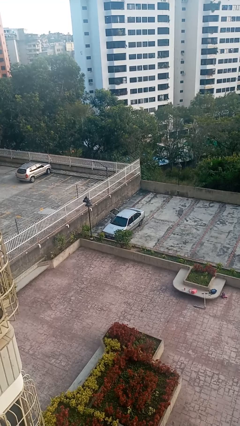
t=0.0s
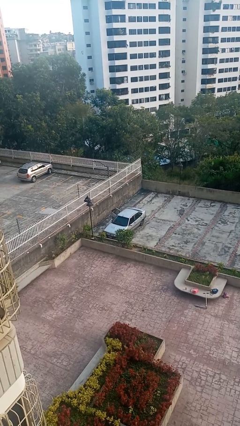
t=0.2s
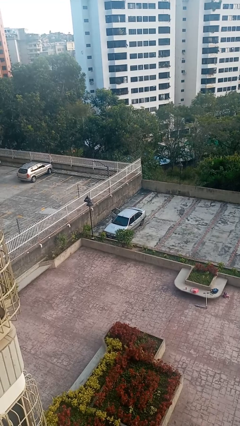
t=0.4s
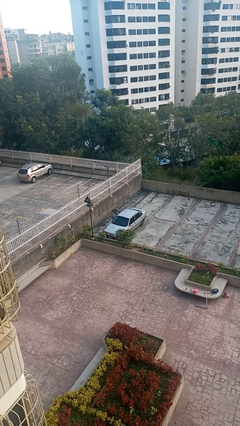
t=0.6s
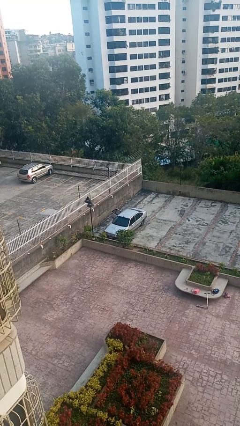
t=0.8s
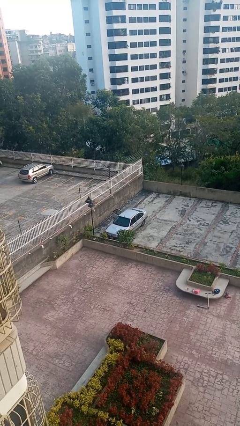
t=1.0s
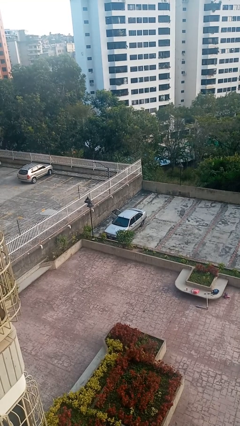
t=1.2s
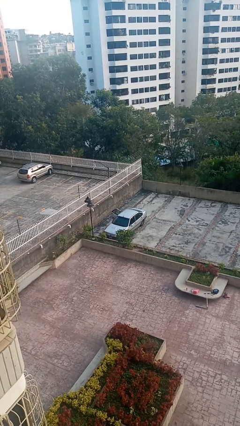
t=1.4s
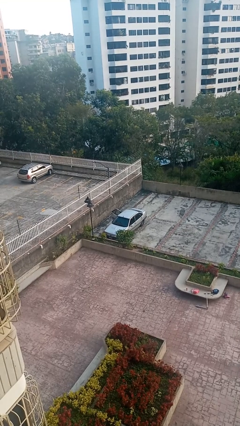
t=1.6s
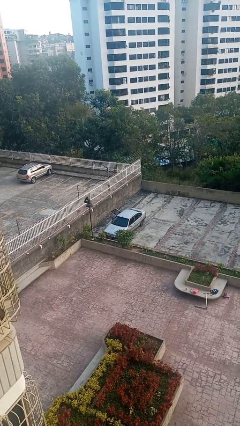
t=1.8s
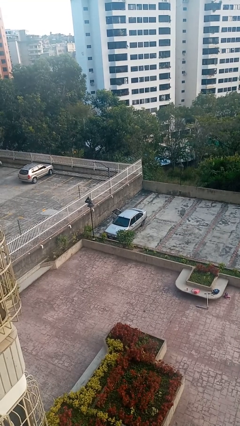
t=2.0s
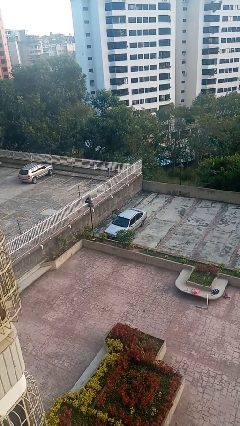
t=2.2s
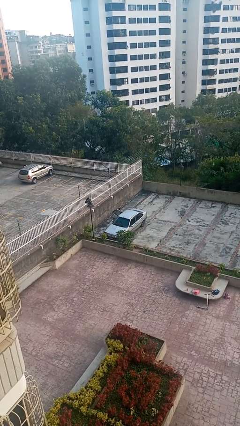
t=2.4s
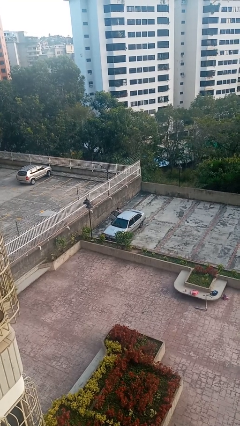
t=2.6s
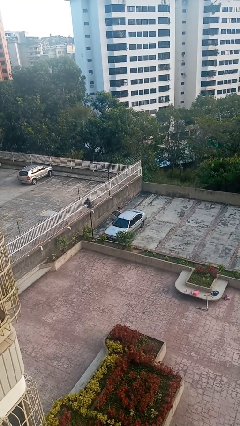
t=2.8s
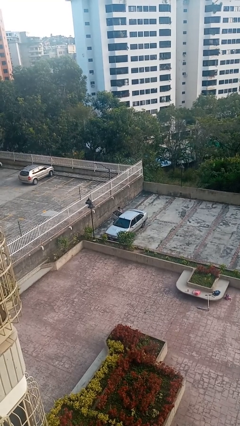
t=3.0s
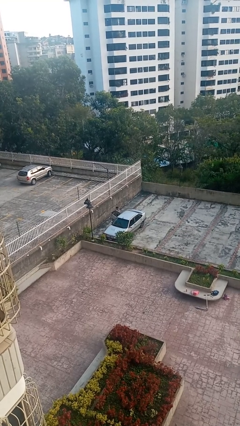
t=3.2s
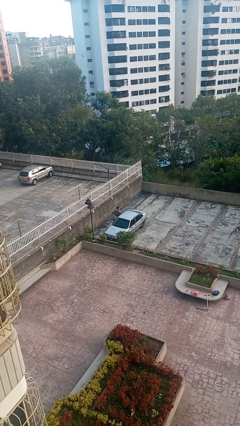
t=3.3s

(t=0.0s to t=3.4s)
person exits car

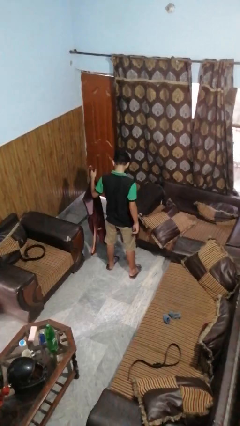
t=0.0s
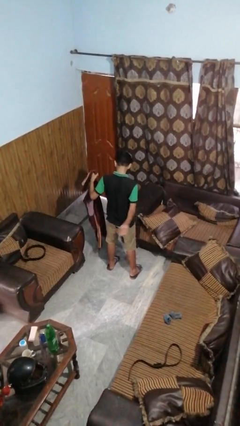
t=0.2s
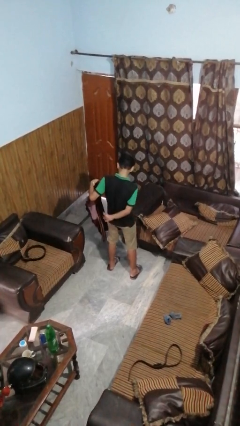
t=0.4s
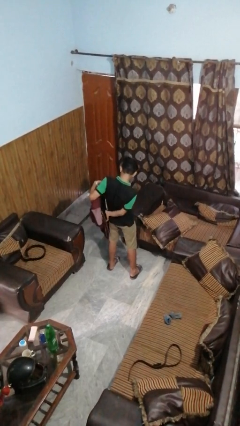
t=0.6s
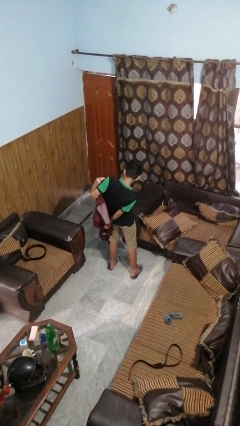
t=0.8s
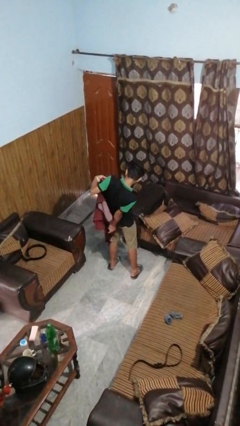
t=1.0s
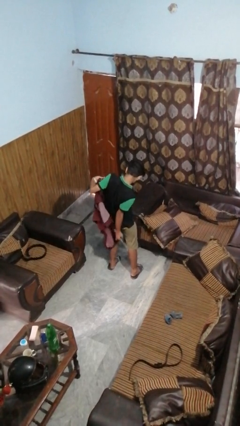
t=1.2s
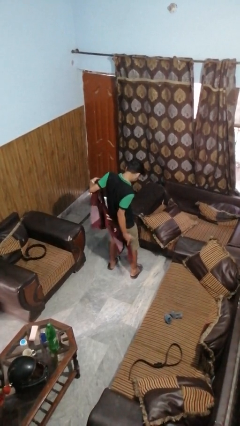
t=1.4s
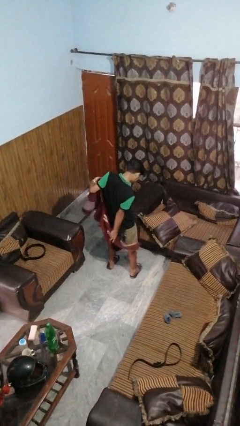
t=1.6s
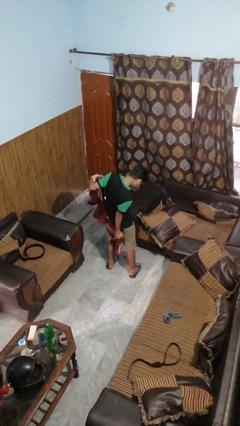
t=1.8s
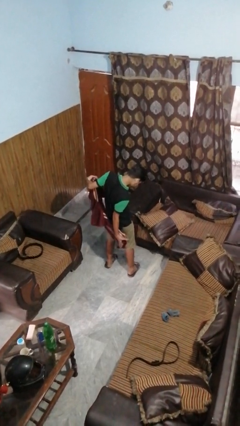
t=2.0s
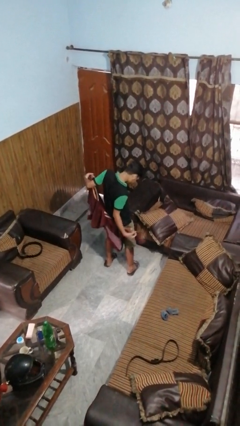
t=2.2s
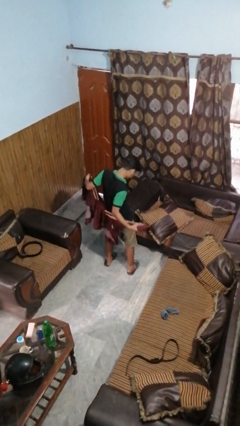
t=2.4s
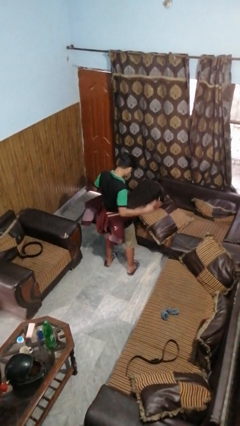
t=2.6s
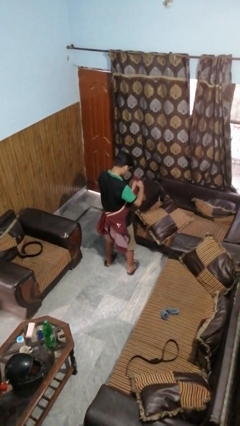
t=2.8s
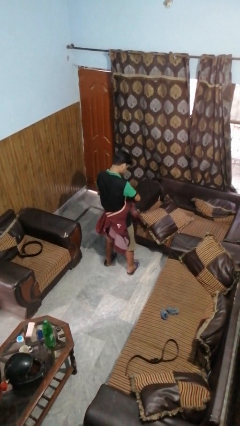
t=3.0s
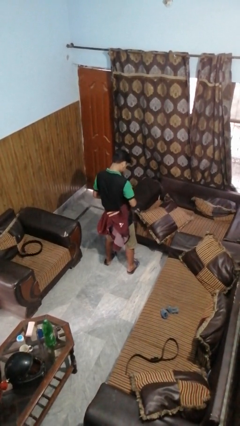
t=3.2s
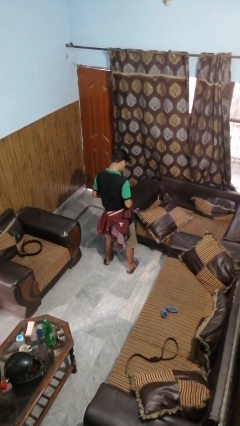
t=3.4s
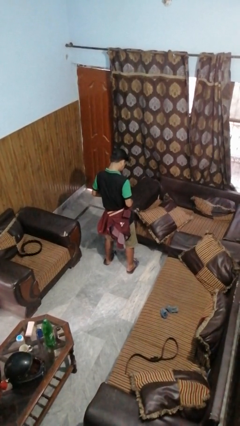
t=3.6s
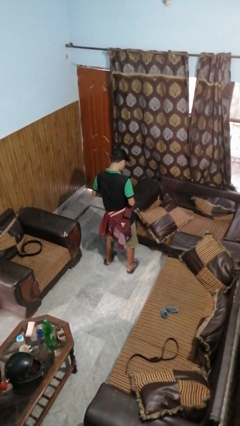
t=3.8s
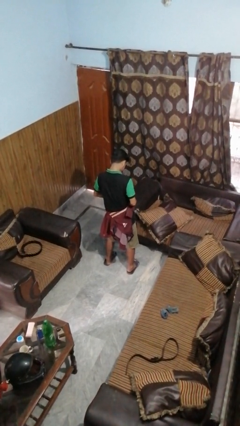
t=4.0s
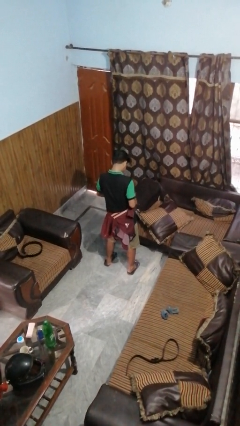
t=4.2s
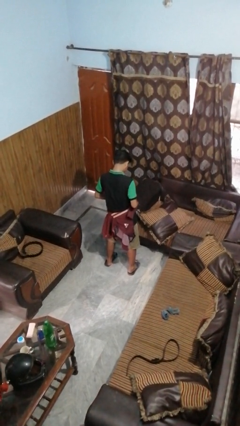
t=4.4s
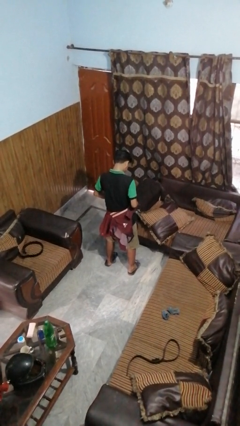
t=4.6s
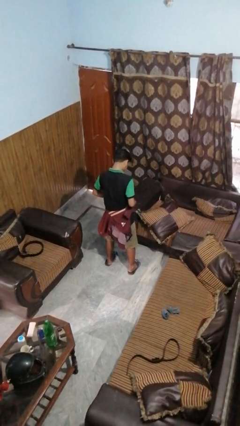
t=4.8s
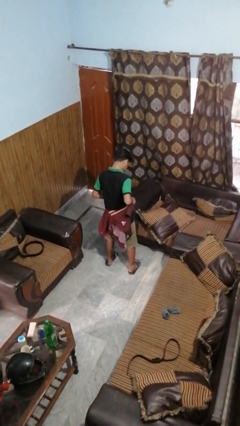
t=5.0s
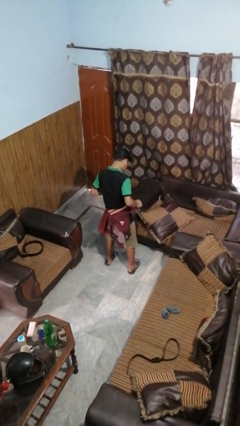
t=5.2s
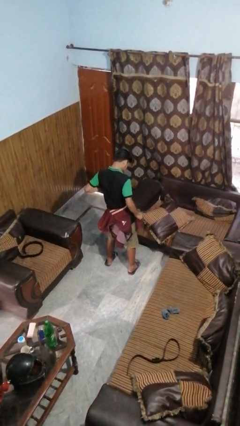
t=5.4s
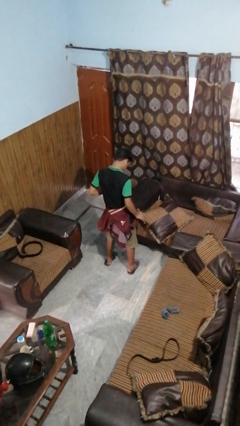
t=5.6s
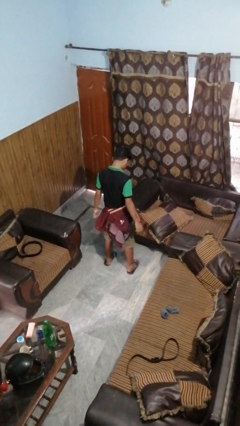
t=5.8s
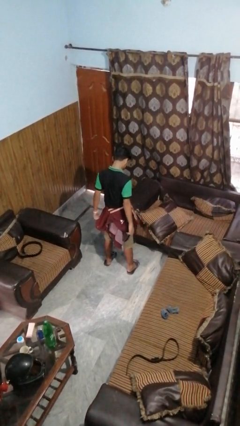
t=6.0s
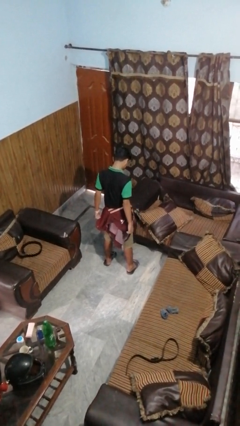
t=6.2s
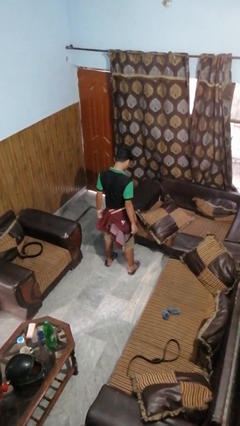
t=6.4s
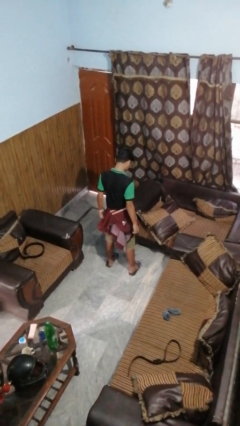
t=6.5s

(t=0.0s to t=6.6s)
person ties jacket around waist

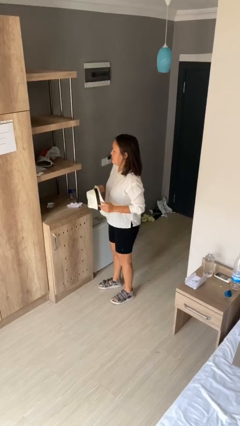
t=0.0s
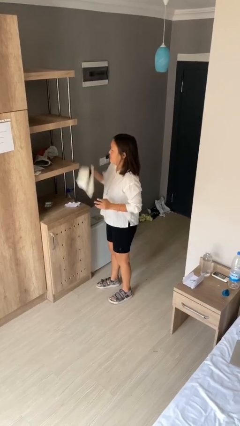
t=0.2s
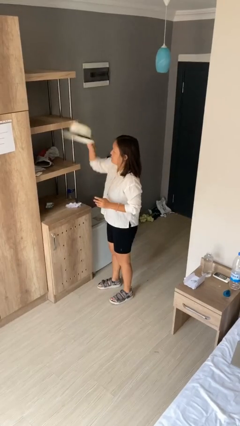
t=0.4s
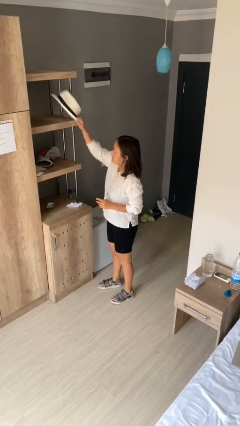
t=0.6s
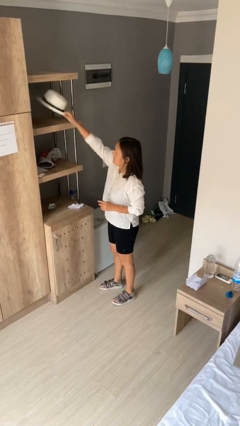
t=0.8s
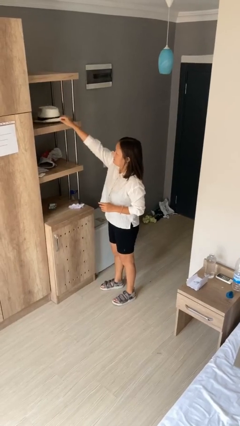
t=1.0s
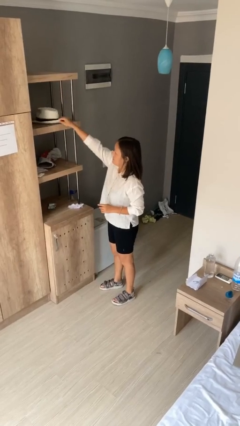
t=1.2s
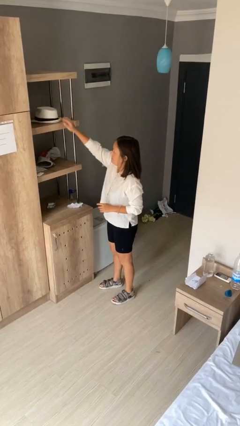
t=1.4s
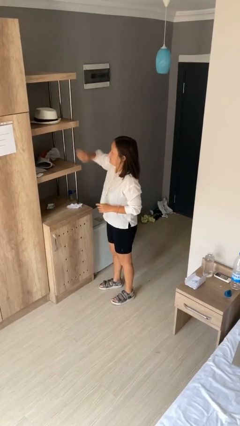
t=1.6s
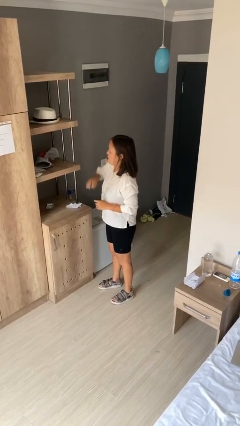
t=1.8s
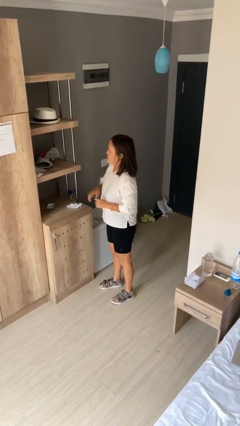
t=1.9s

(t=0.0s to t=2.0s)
person puts down object on shelf

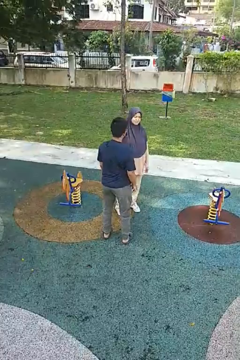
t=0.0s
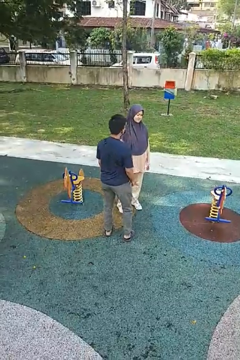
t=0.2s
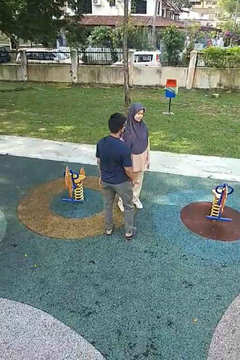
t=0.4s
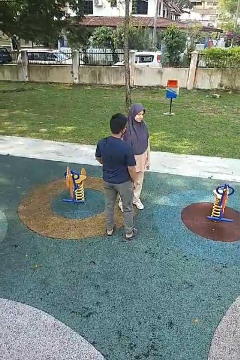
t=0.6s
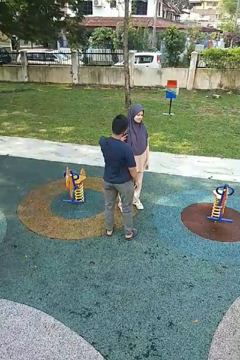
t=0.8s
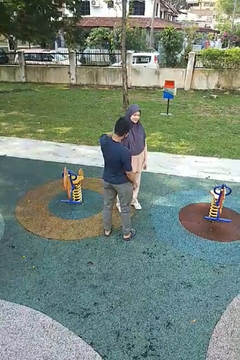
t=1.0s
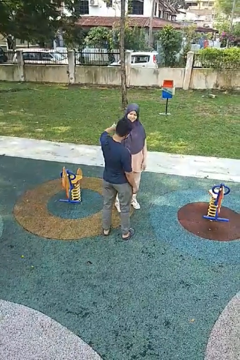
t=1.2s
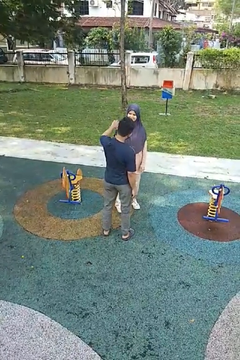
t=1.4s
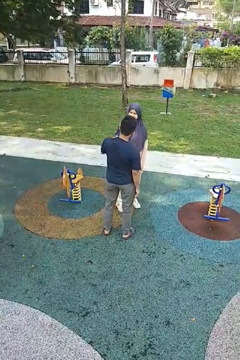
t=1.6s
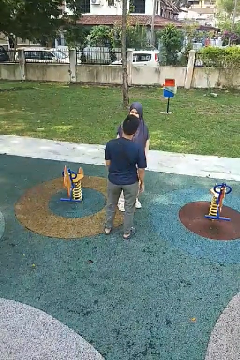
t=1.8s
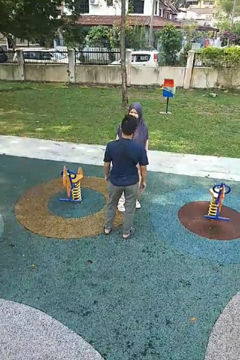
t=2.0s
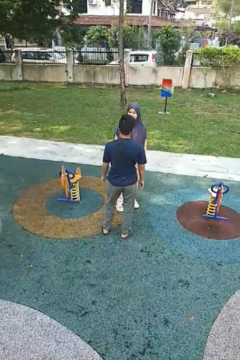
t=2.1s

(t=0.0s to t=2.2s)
person shoves person

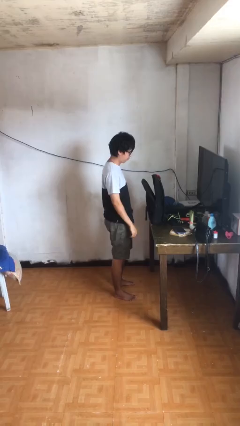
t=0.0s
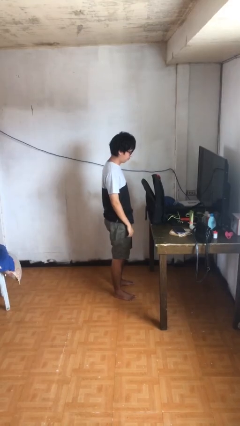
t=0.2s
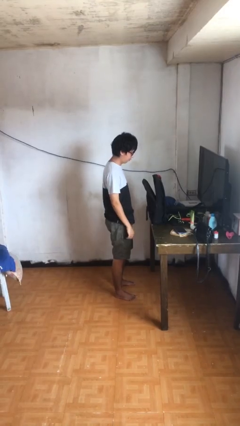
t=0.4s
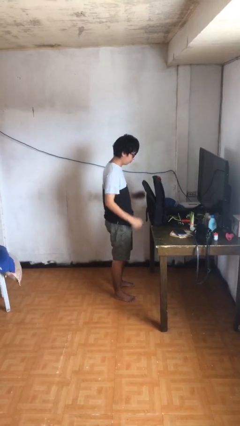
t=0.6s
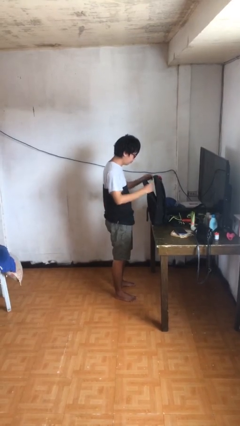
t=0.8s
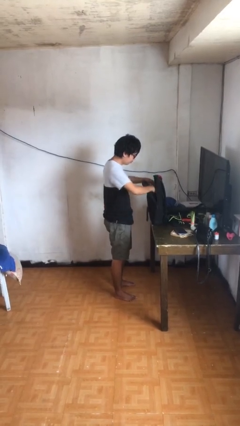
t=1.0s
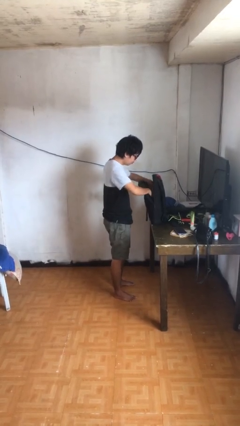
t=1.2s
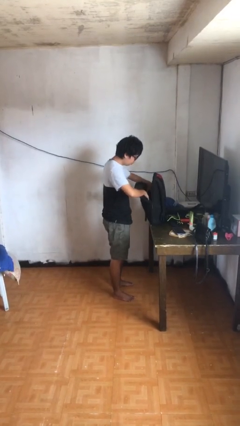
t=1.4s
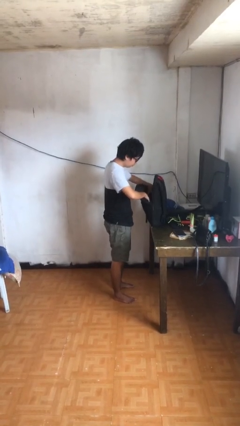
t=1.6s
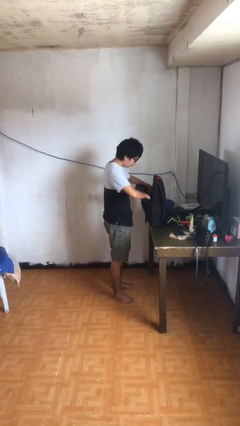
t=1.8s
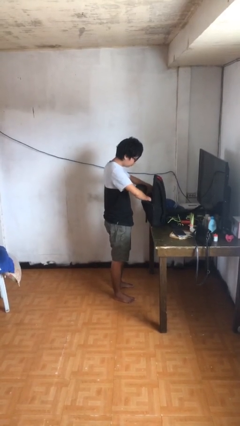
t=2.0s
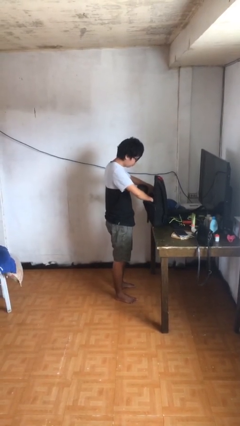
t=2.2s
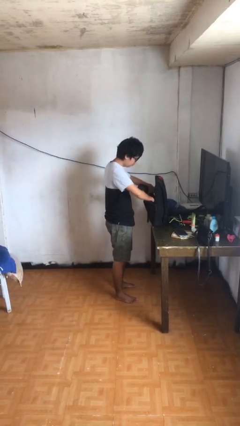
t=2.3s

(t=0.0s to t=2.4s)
person searches in backpack

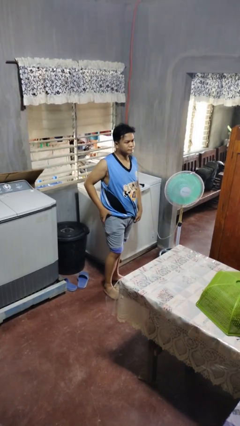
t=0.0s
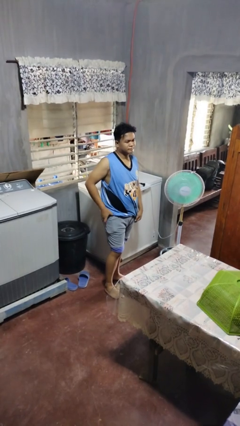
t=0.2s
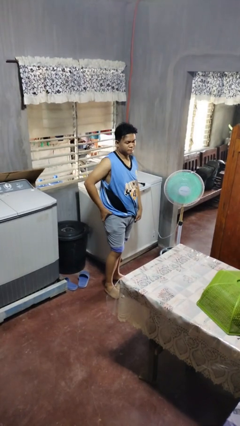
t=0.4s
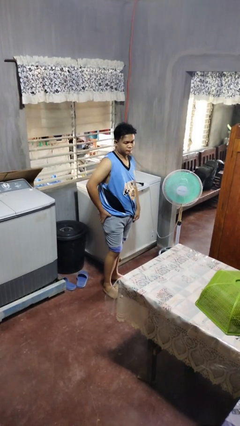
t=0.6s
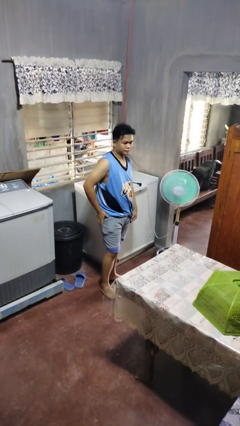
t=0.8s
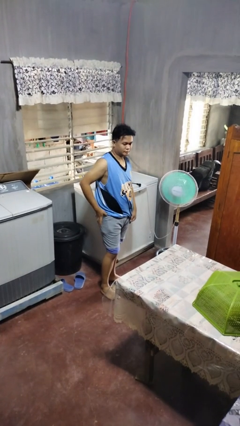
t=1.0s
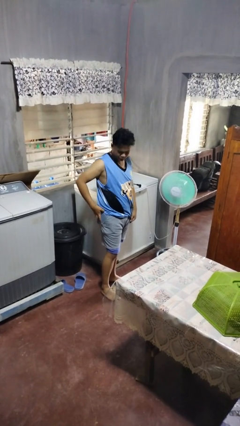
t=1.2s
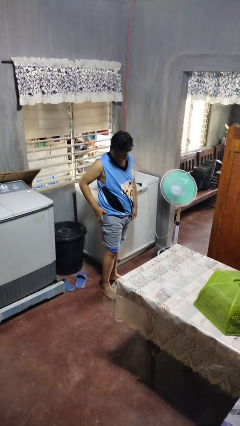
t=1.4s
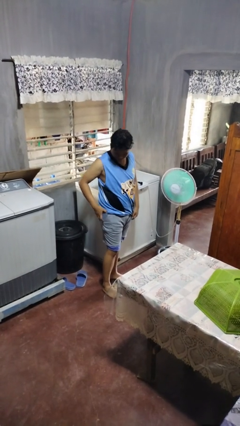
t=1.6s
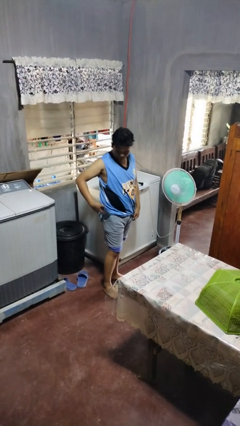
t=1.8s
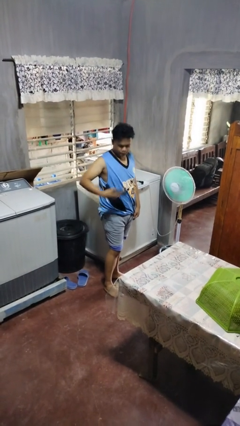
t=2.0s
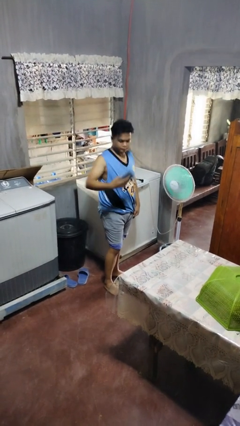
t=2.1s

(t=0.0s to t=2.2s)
person takes phone from pocket
